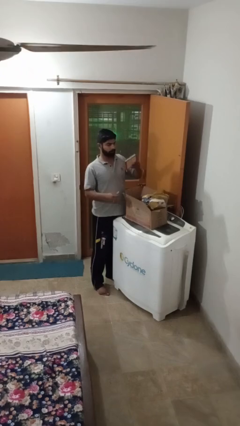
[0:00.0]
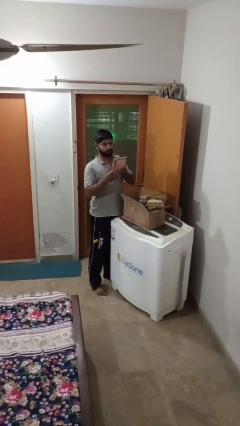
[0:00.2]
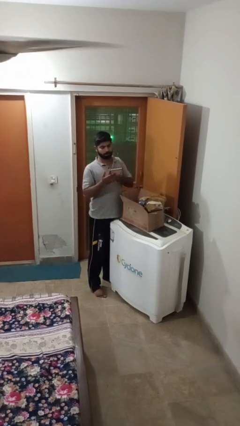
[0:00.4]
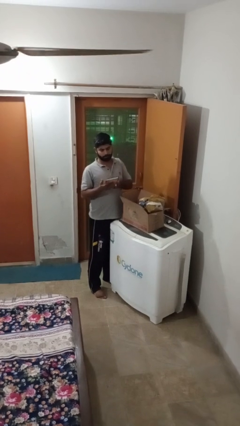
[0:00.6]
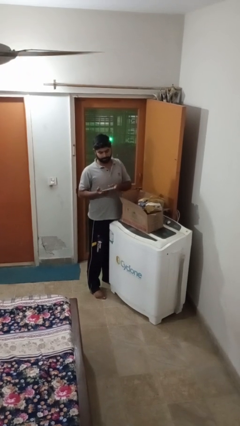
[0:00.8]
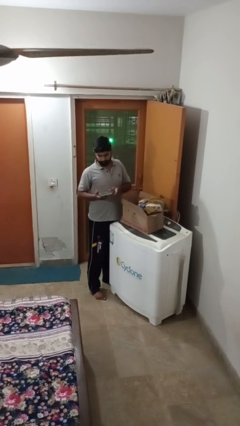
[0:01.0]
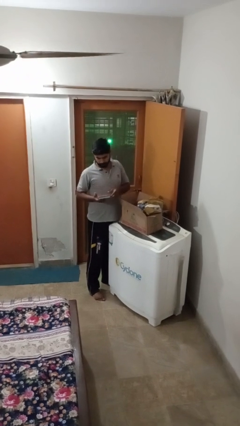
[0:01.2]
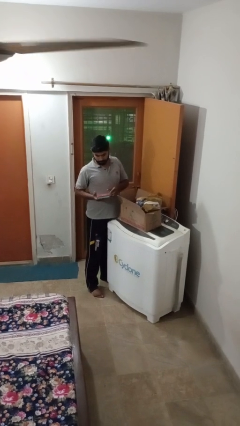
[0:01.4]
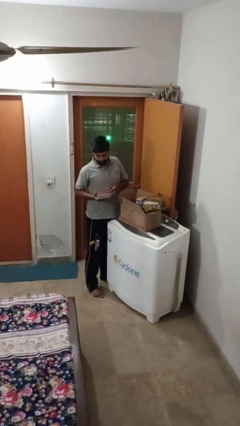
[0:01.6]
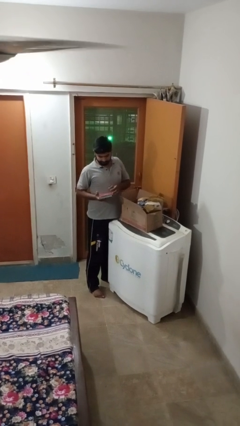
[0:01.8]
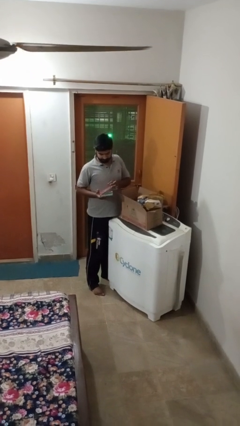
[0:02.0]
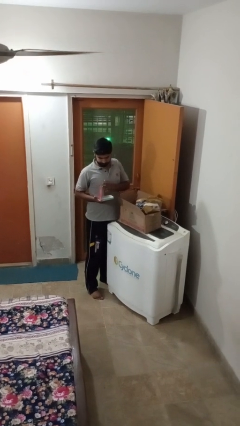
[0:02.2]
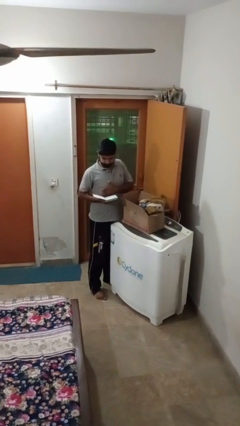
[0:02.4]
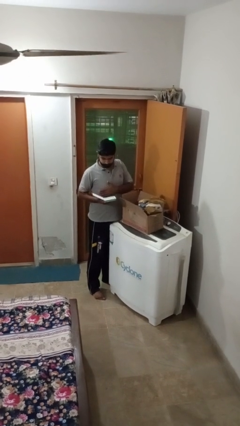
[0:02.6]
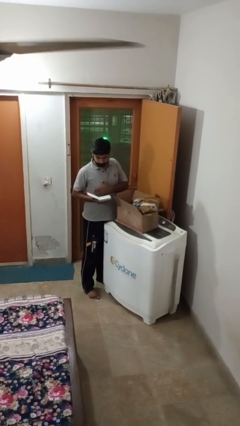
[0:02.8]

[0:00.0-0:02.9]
person takes object from box

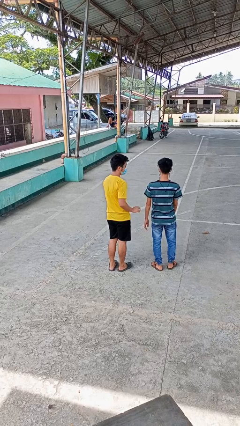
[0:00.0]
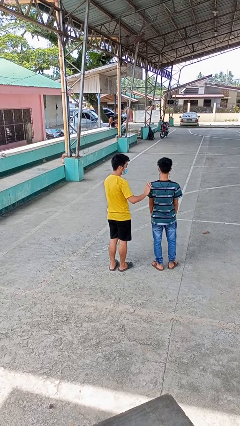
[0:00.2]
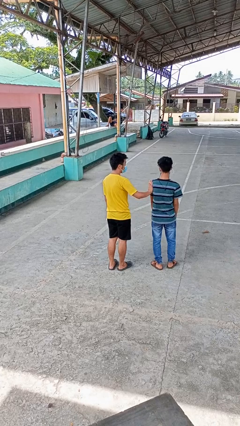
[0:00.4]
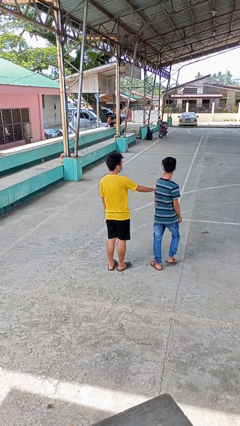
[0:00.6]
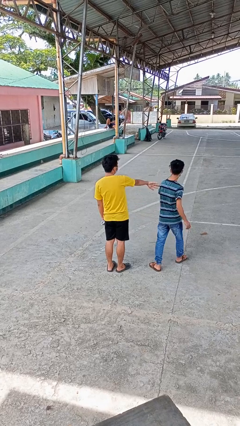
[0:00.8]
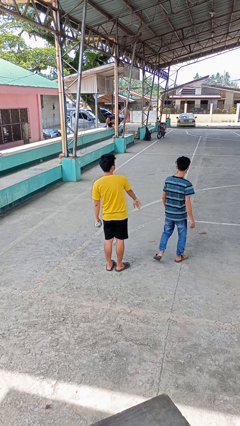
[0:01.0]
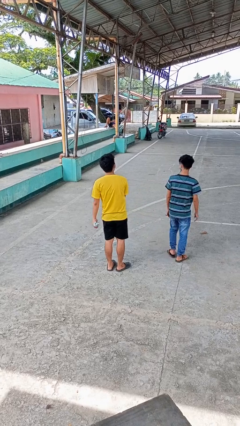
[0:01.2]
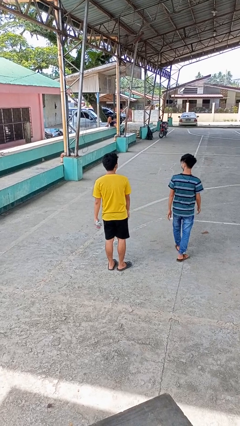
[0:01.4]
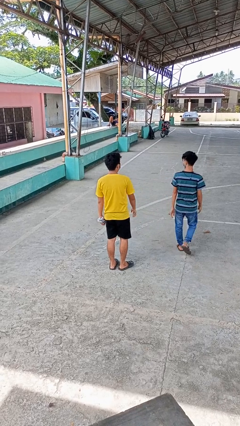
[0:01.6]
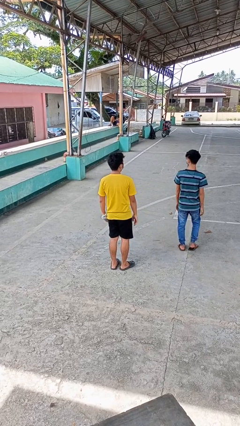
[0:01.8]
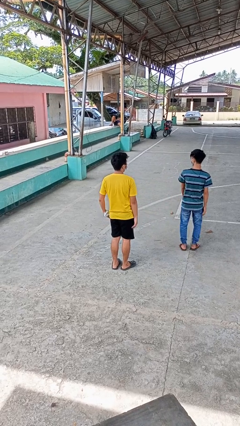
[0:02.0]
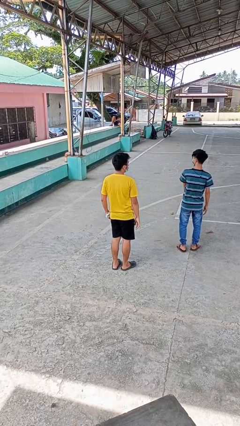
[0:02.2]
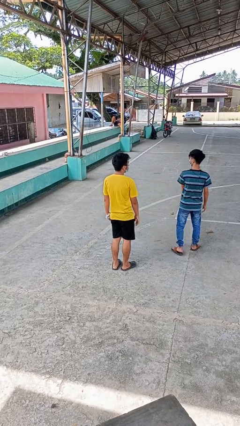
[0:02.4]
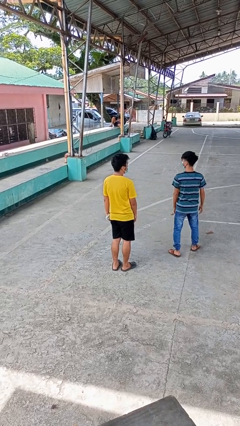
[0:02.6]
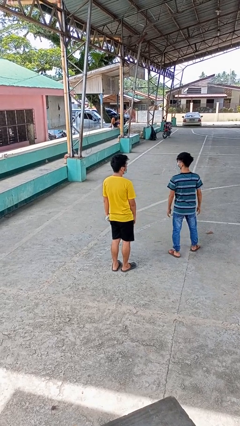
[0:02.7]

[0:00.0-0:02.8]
person shoves person

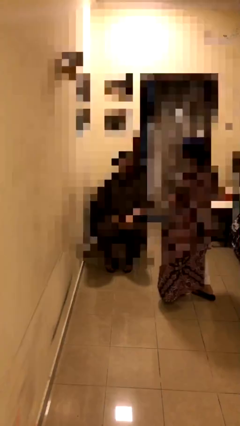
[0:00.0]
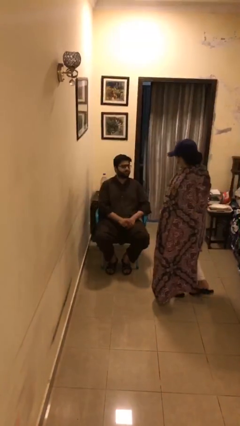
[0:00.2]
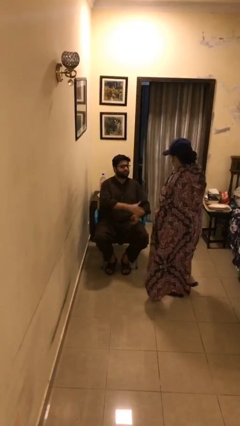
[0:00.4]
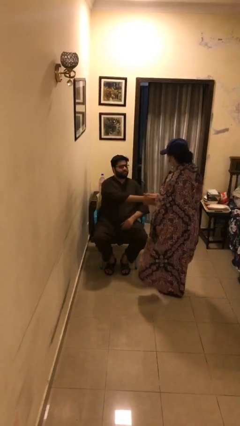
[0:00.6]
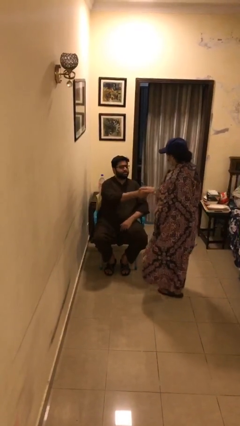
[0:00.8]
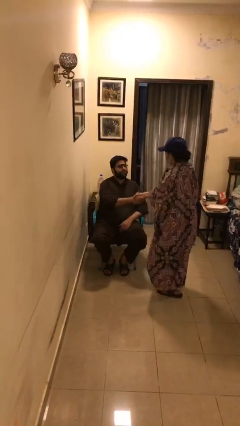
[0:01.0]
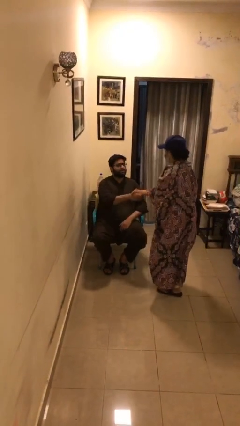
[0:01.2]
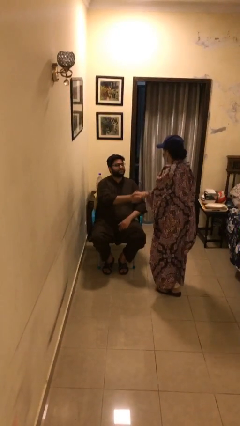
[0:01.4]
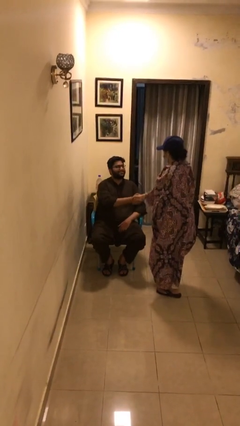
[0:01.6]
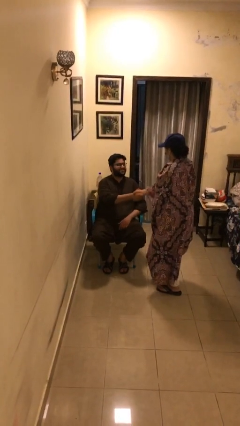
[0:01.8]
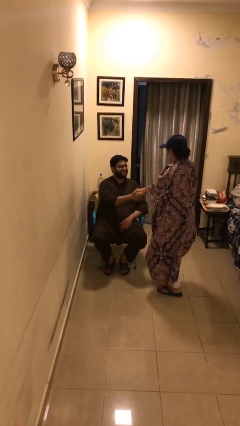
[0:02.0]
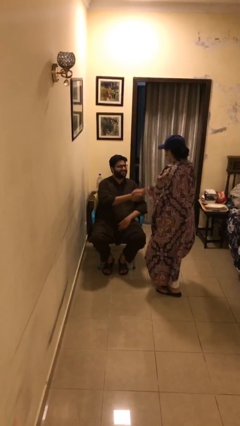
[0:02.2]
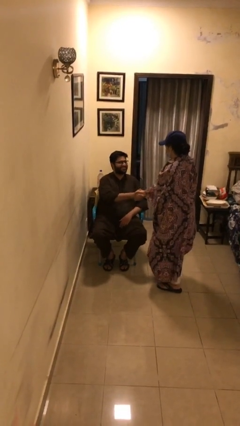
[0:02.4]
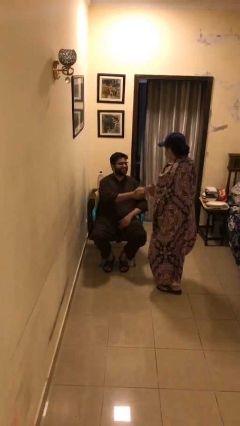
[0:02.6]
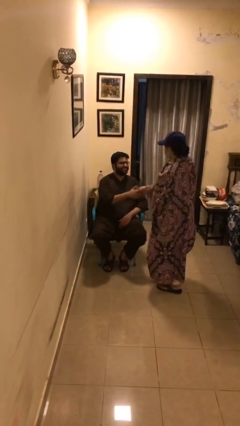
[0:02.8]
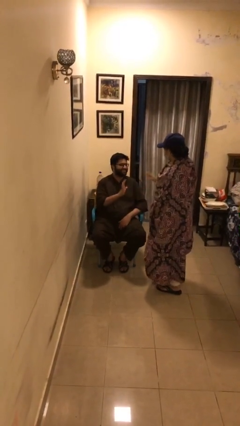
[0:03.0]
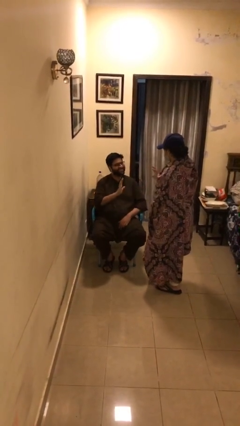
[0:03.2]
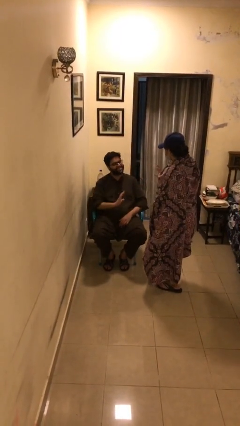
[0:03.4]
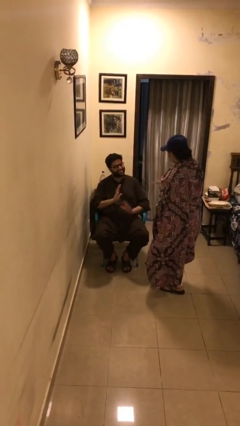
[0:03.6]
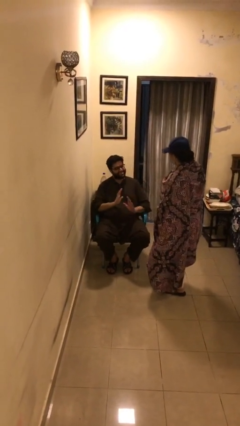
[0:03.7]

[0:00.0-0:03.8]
person shakes hand

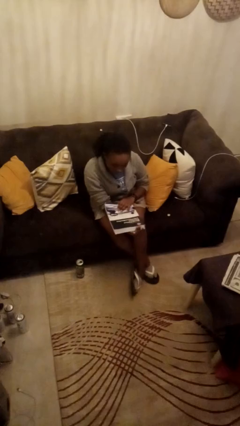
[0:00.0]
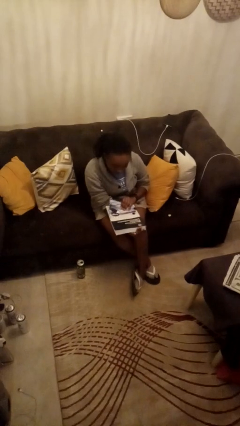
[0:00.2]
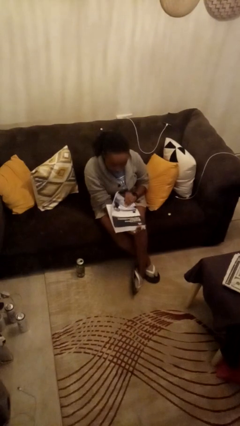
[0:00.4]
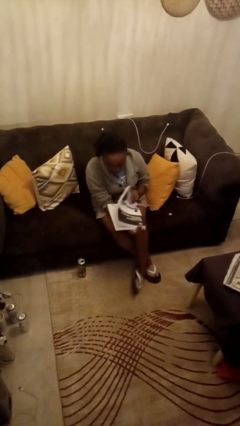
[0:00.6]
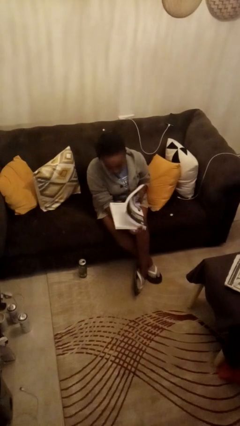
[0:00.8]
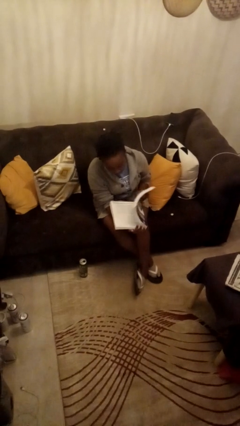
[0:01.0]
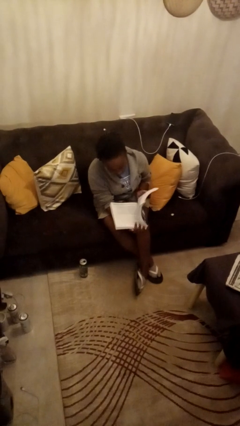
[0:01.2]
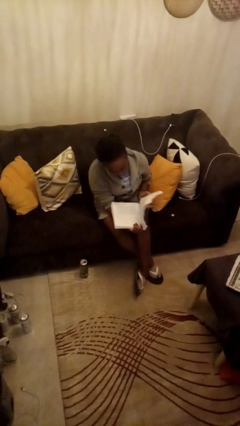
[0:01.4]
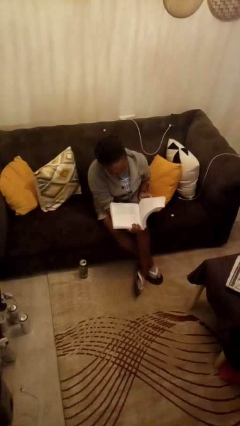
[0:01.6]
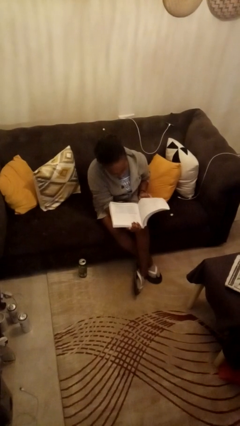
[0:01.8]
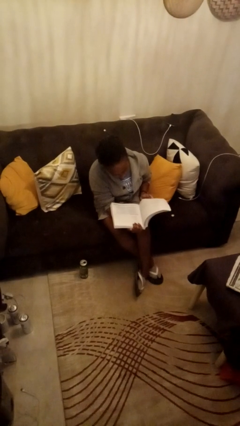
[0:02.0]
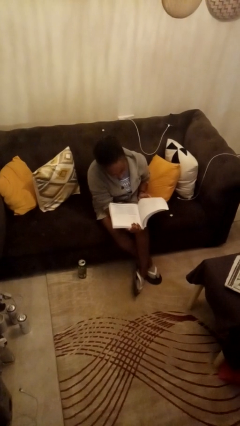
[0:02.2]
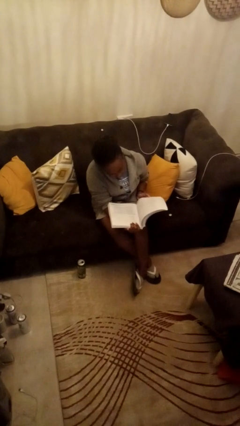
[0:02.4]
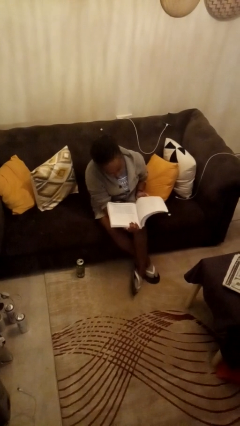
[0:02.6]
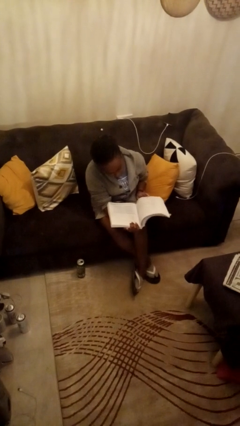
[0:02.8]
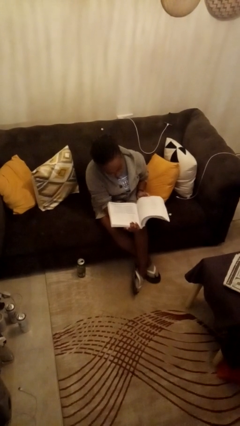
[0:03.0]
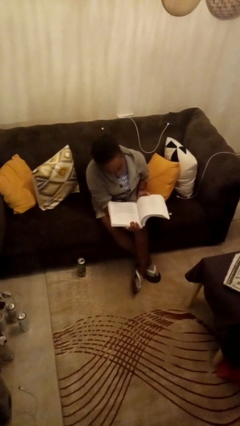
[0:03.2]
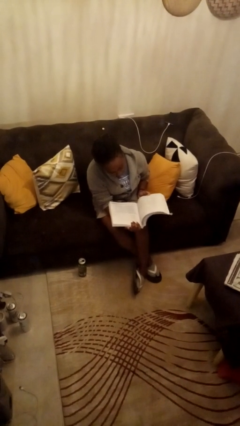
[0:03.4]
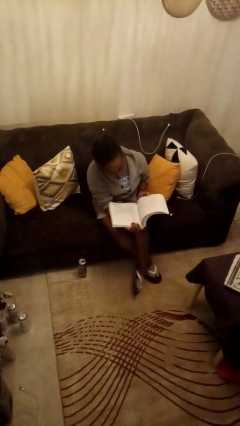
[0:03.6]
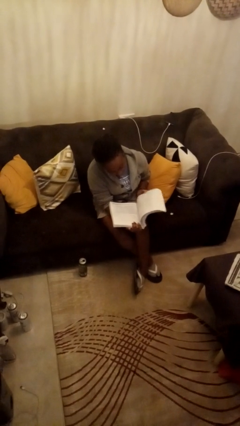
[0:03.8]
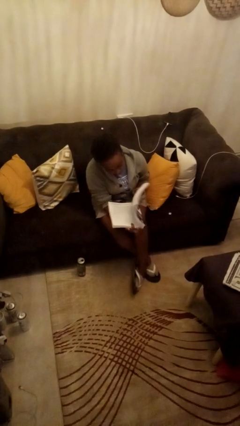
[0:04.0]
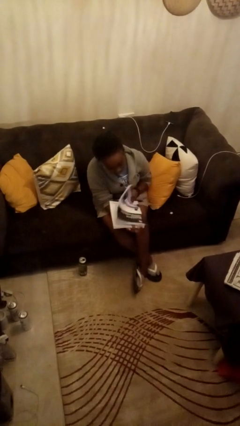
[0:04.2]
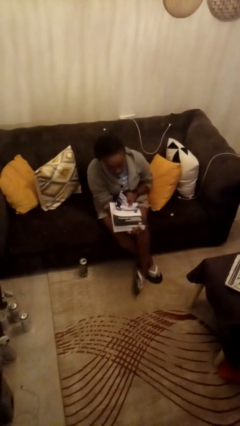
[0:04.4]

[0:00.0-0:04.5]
person reads book

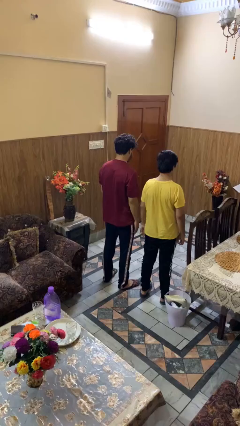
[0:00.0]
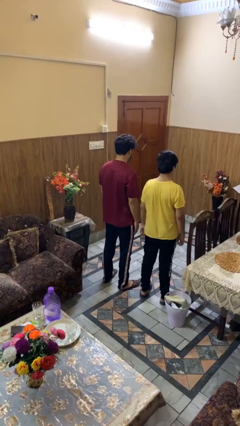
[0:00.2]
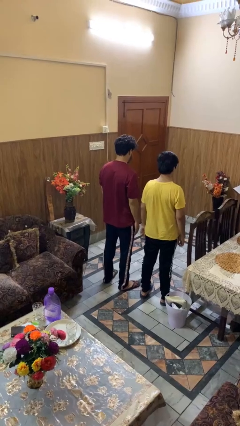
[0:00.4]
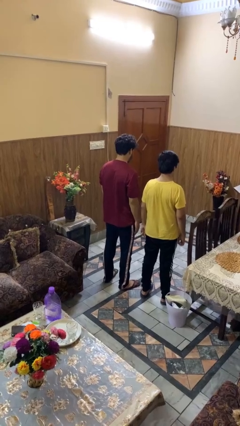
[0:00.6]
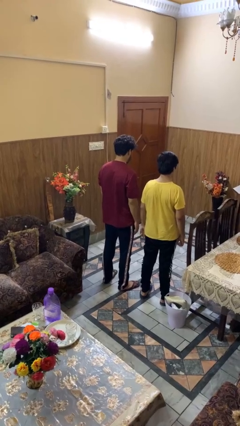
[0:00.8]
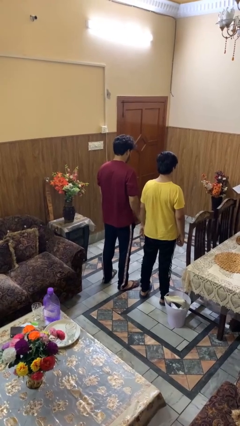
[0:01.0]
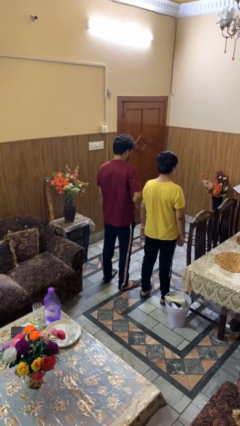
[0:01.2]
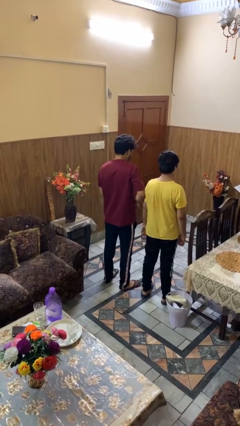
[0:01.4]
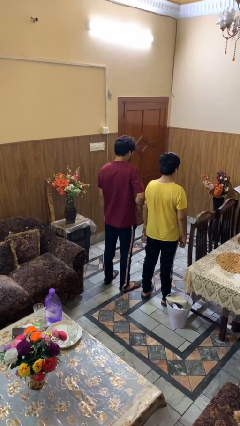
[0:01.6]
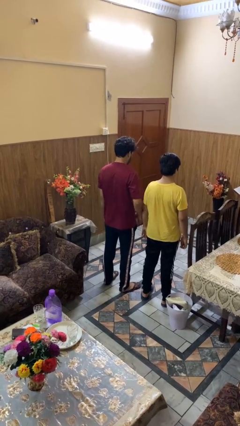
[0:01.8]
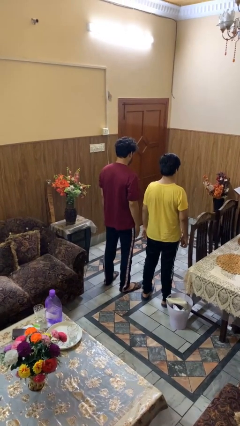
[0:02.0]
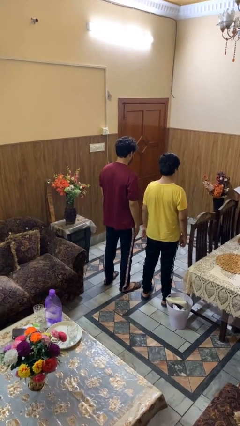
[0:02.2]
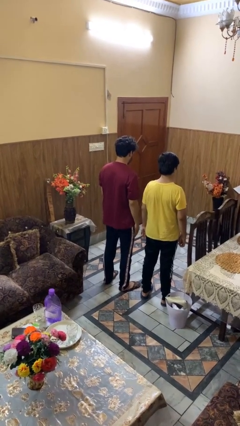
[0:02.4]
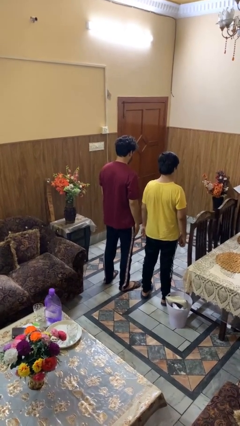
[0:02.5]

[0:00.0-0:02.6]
person nudges person with elbow

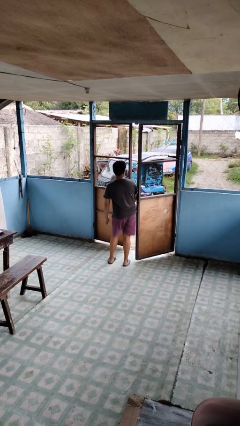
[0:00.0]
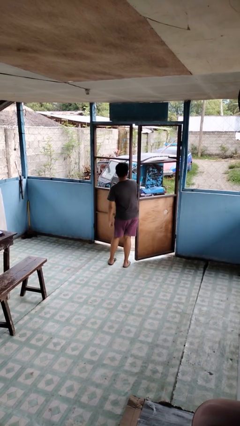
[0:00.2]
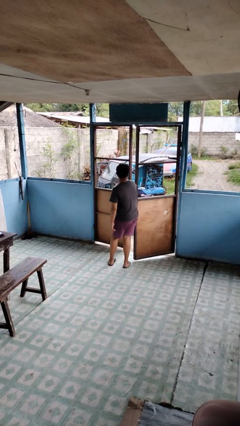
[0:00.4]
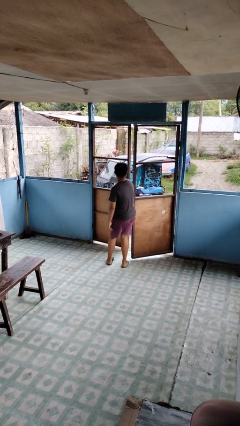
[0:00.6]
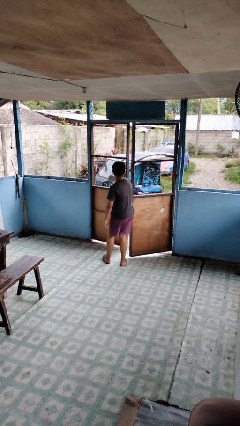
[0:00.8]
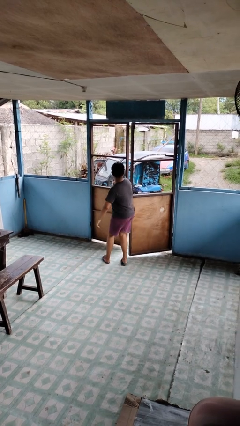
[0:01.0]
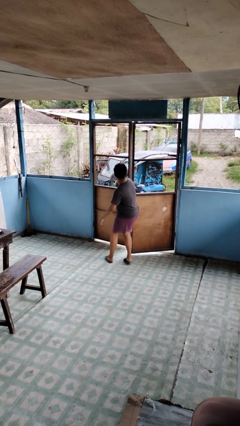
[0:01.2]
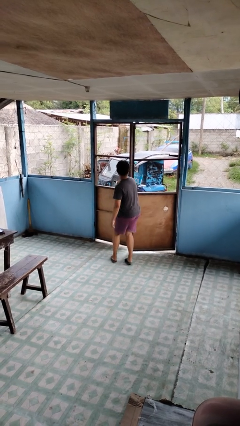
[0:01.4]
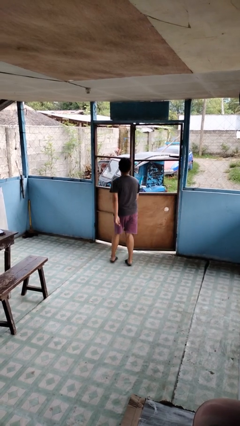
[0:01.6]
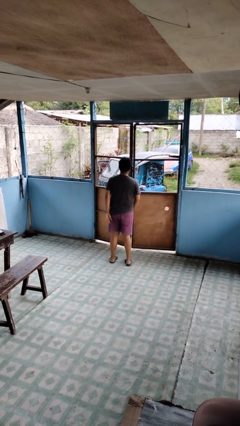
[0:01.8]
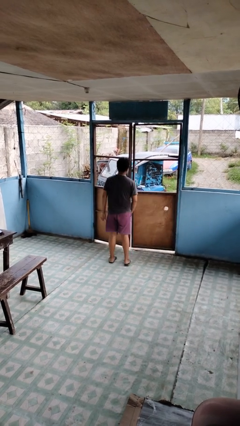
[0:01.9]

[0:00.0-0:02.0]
person closes door with hip
